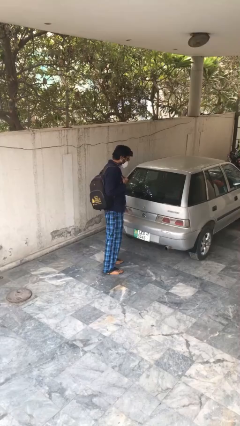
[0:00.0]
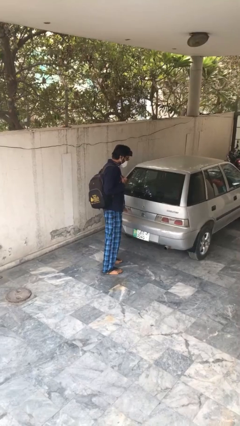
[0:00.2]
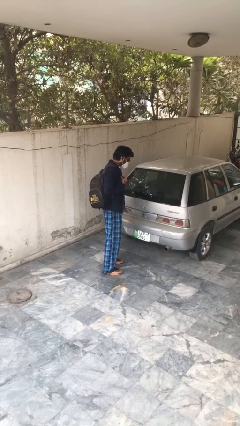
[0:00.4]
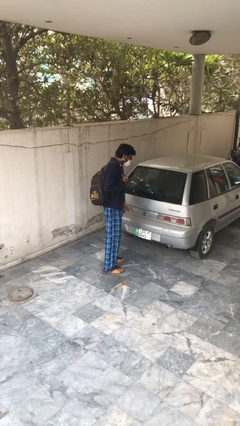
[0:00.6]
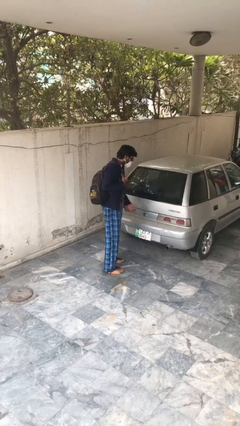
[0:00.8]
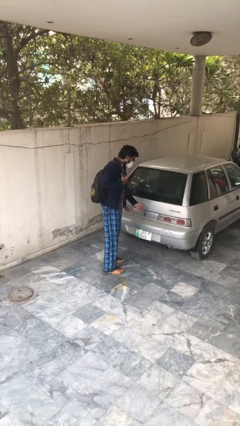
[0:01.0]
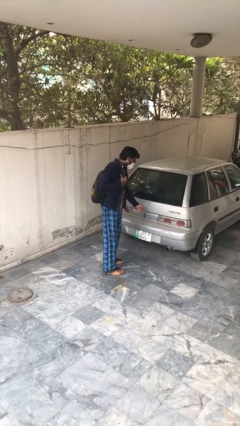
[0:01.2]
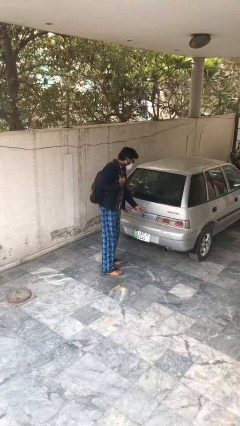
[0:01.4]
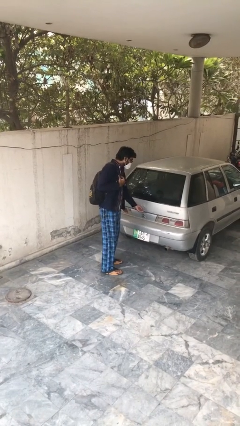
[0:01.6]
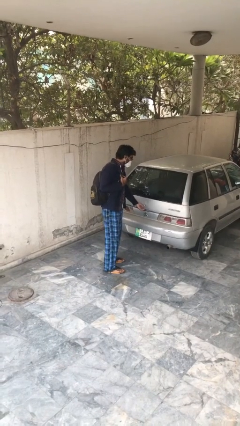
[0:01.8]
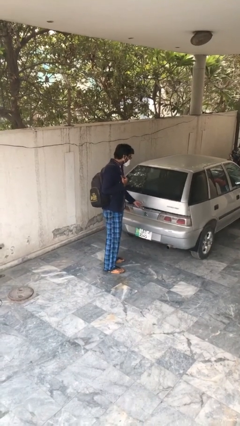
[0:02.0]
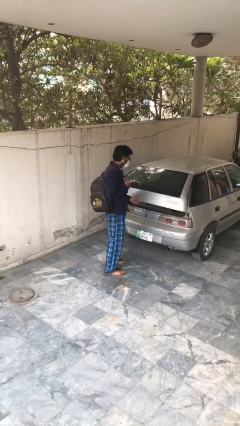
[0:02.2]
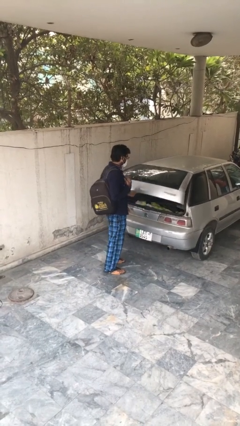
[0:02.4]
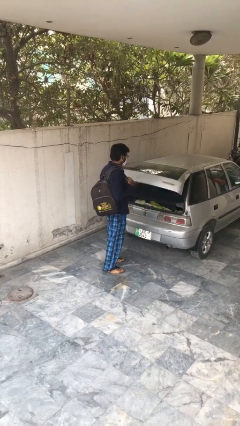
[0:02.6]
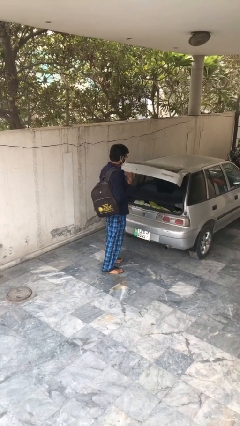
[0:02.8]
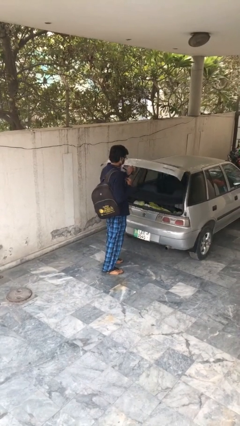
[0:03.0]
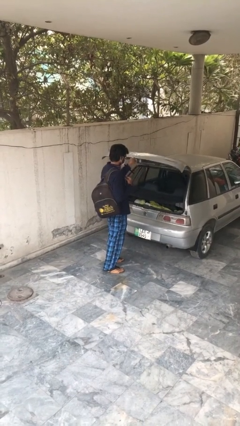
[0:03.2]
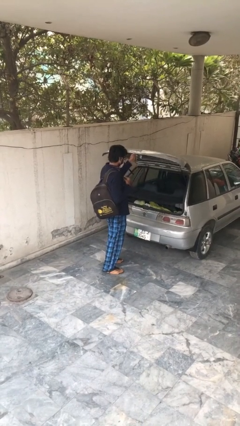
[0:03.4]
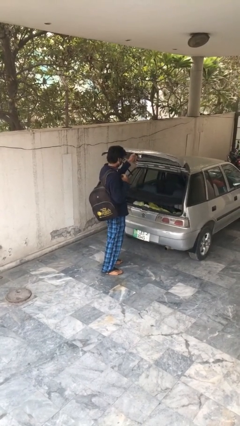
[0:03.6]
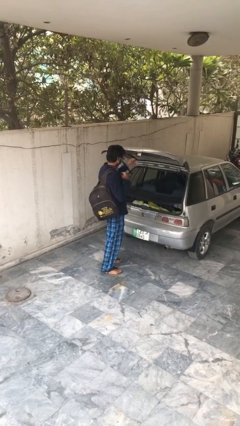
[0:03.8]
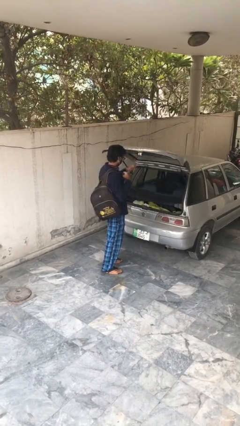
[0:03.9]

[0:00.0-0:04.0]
person opens car trunk

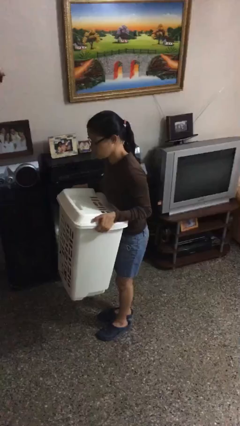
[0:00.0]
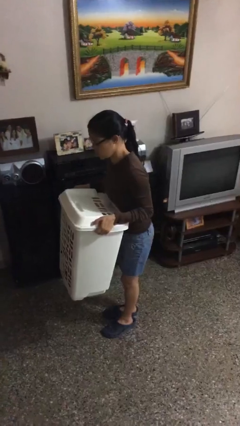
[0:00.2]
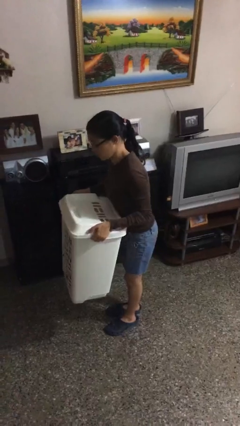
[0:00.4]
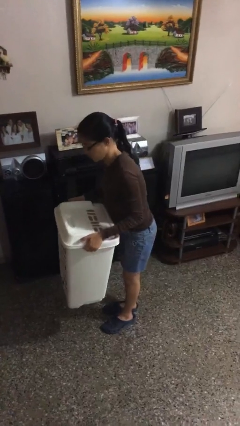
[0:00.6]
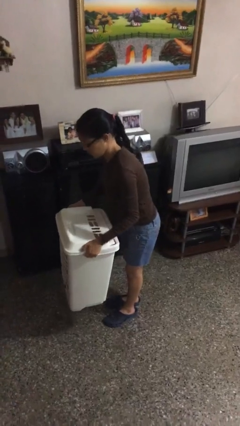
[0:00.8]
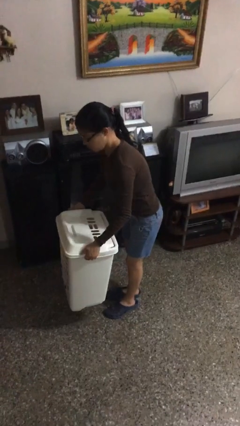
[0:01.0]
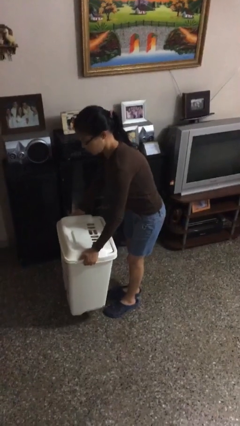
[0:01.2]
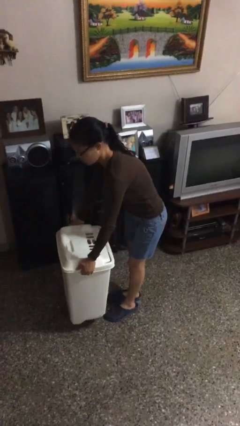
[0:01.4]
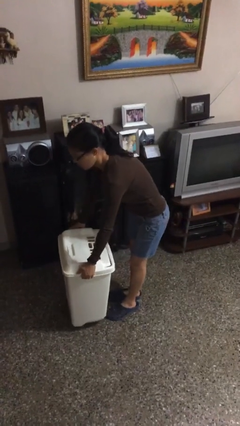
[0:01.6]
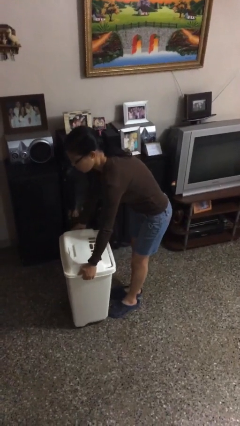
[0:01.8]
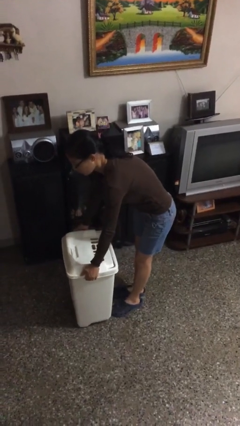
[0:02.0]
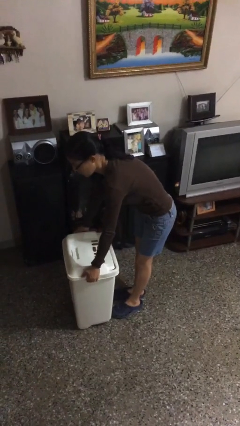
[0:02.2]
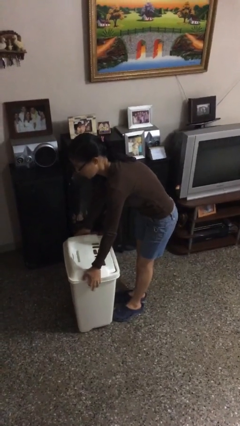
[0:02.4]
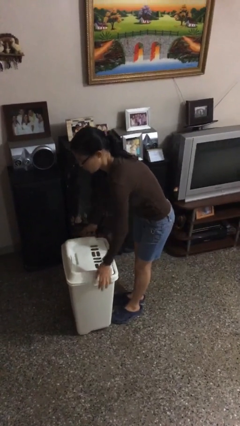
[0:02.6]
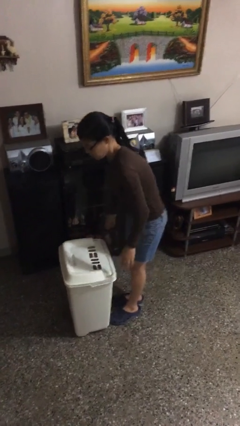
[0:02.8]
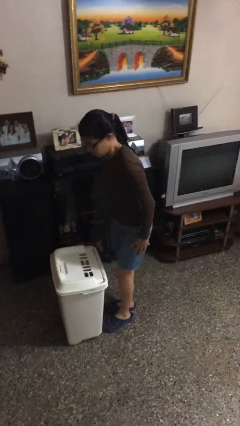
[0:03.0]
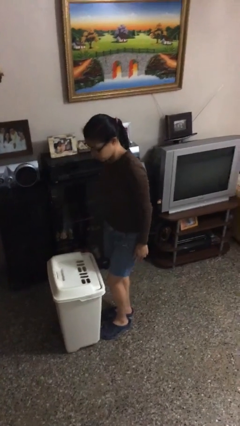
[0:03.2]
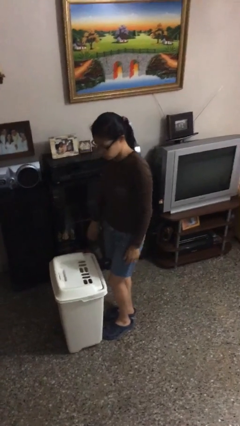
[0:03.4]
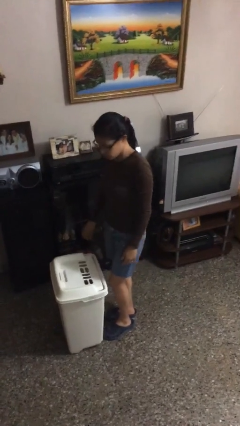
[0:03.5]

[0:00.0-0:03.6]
person puts down object on floor

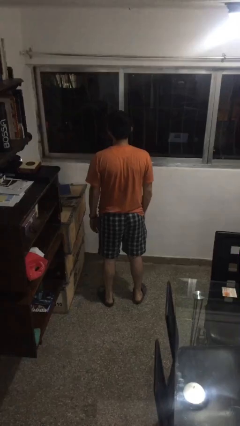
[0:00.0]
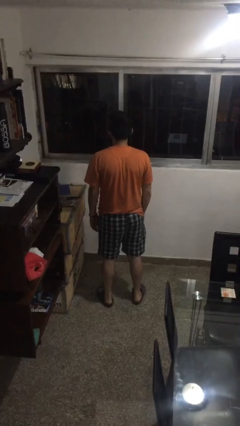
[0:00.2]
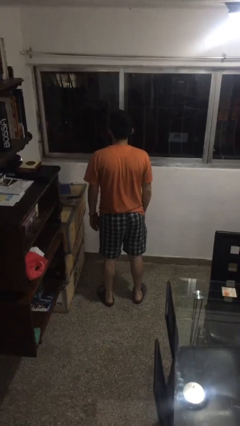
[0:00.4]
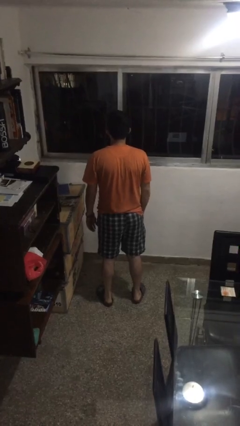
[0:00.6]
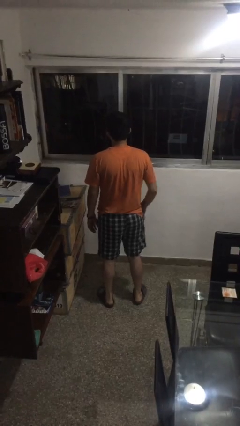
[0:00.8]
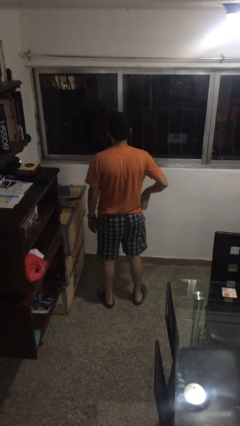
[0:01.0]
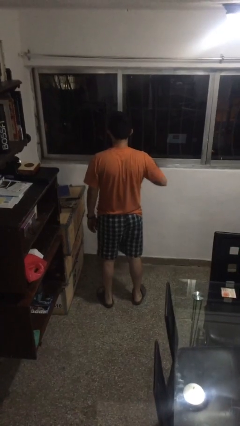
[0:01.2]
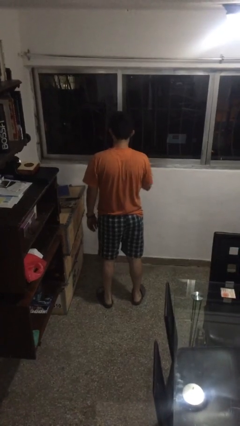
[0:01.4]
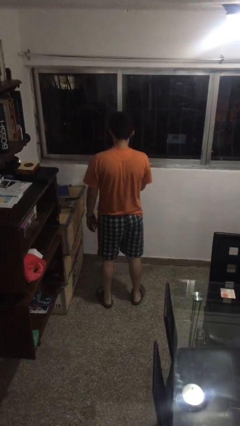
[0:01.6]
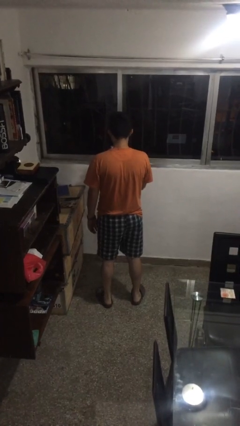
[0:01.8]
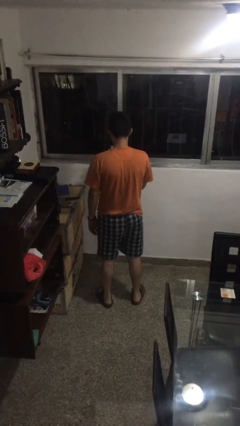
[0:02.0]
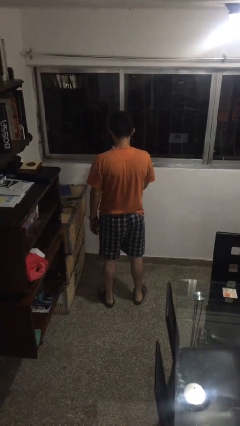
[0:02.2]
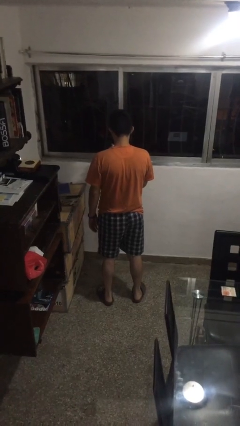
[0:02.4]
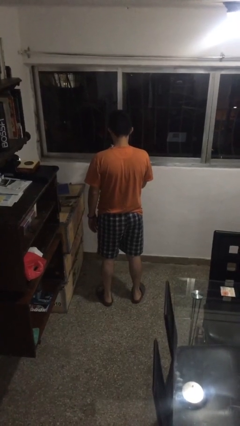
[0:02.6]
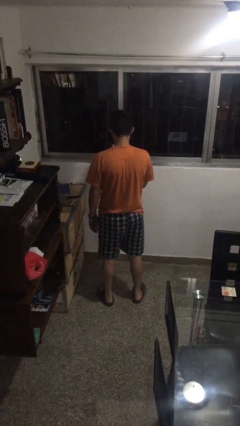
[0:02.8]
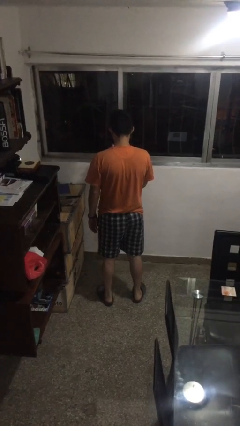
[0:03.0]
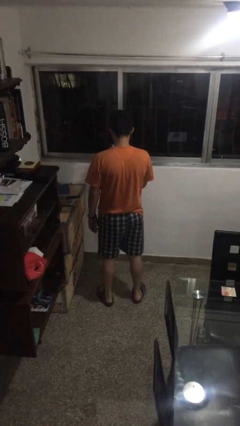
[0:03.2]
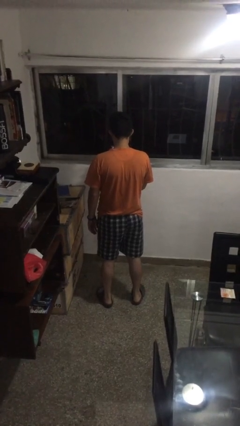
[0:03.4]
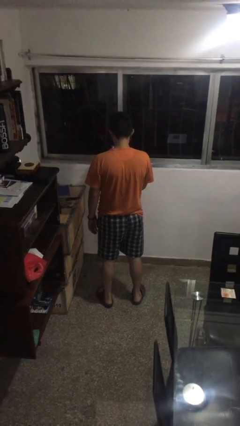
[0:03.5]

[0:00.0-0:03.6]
person takes phone from pocket

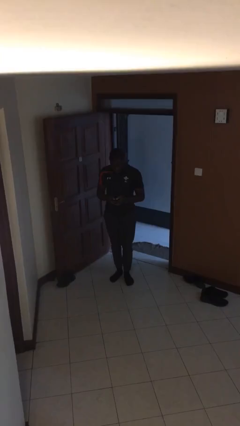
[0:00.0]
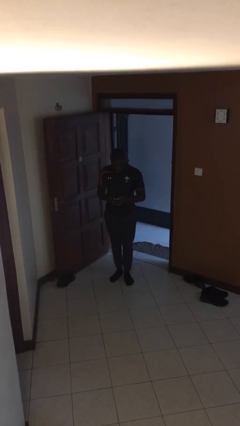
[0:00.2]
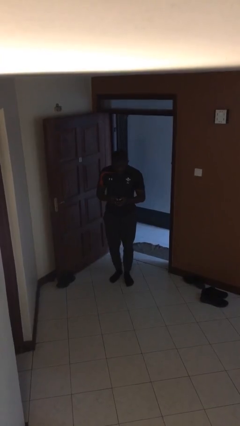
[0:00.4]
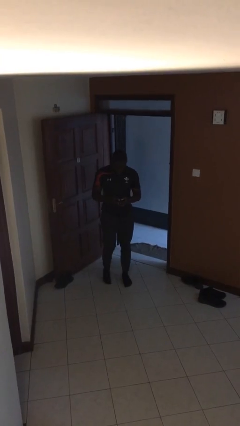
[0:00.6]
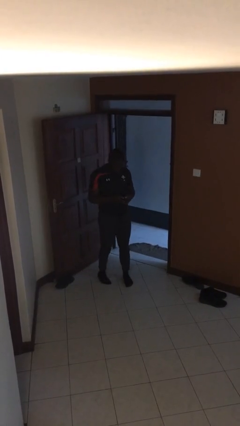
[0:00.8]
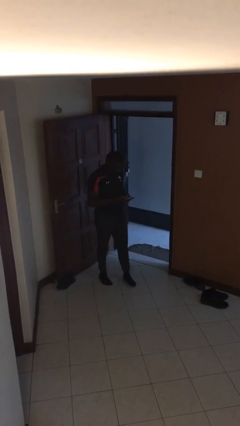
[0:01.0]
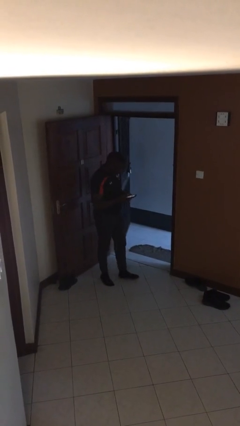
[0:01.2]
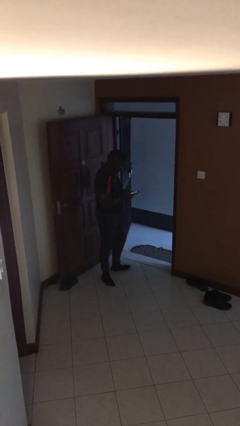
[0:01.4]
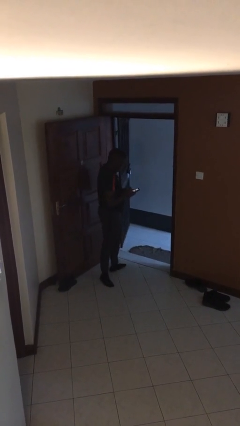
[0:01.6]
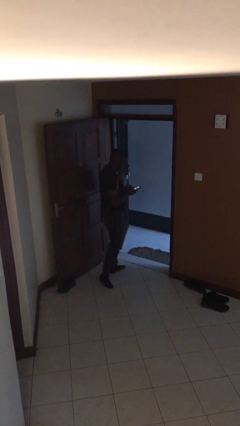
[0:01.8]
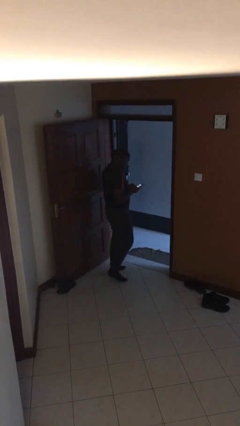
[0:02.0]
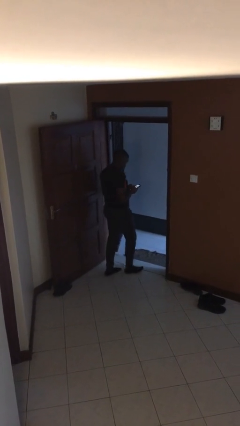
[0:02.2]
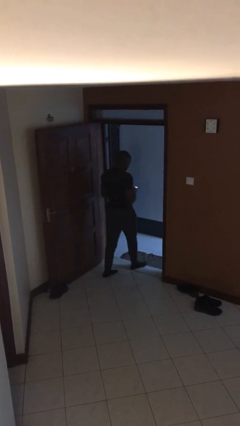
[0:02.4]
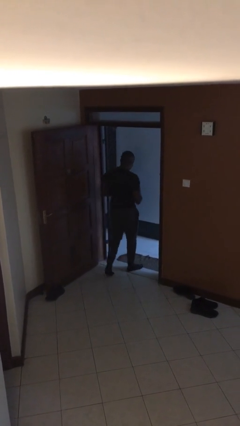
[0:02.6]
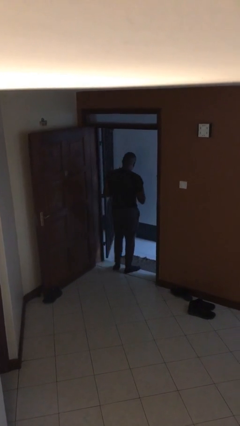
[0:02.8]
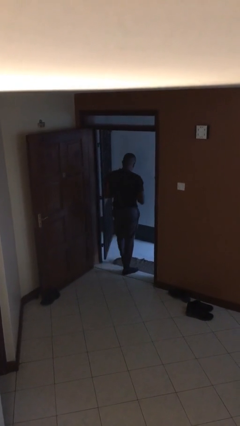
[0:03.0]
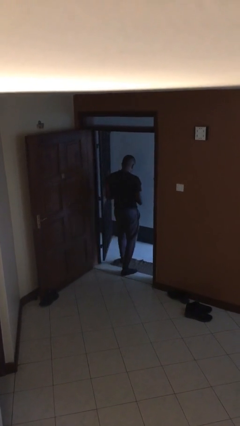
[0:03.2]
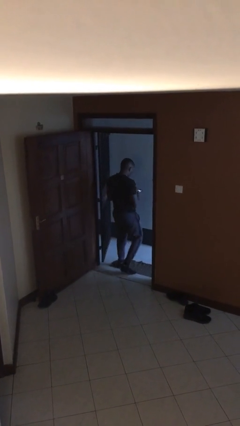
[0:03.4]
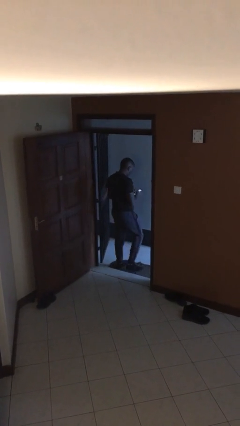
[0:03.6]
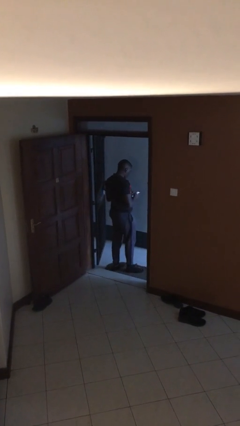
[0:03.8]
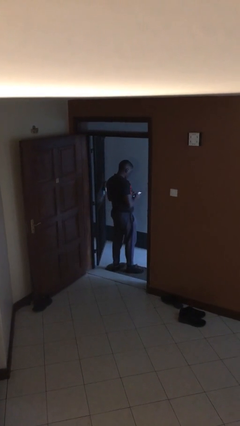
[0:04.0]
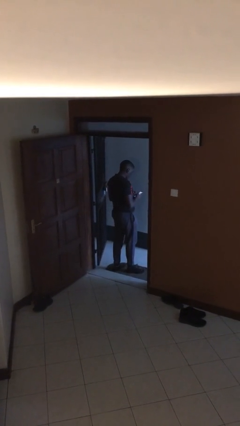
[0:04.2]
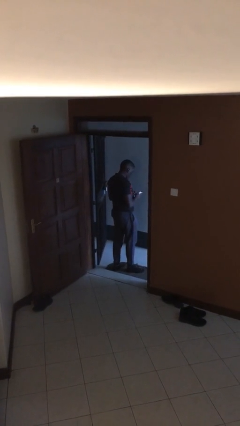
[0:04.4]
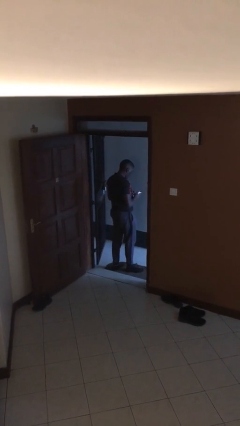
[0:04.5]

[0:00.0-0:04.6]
person exits scene through structure

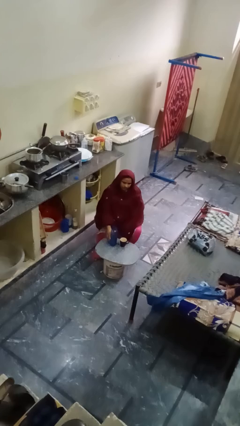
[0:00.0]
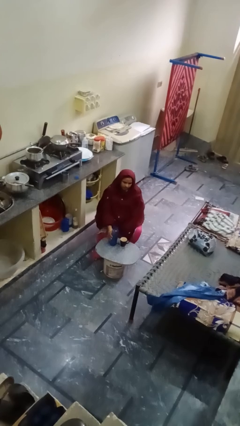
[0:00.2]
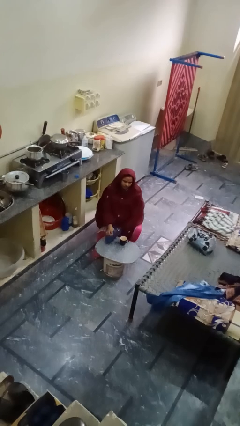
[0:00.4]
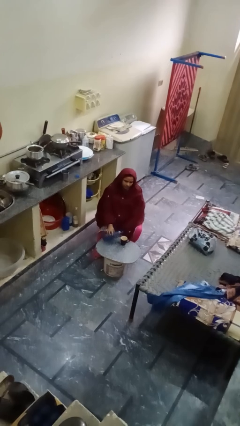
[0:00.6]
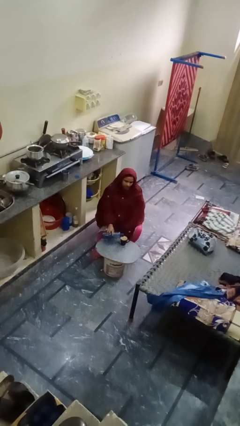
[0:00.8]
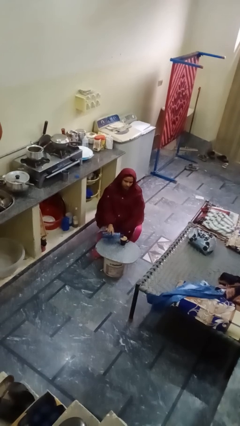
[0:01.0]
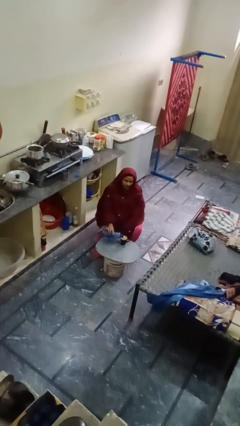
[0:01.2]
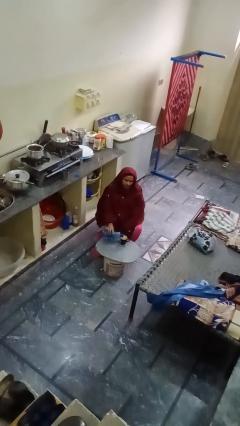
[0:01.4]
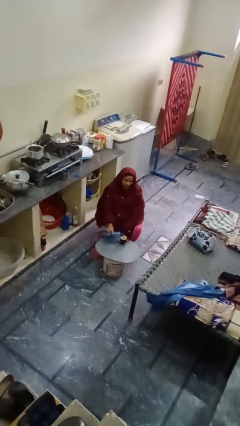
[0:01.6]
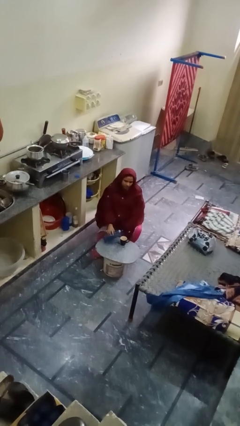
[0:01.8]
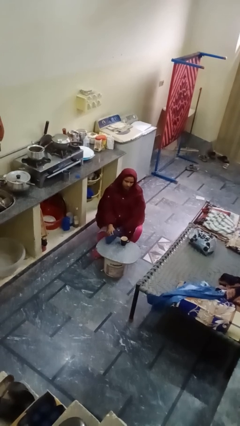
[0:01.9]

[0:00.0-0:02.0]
person pours liquid into cup
